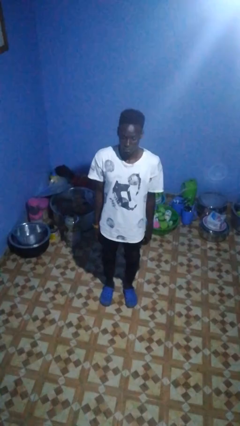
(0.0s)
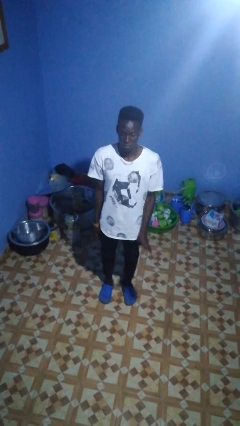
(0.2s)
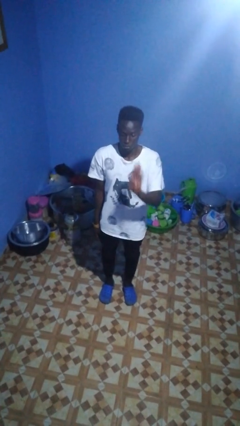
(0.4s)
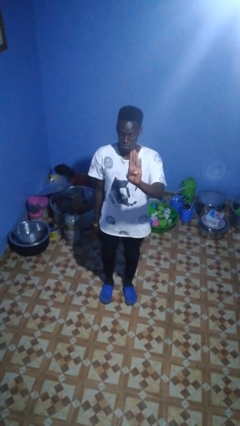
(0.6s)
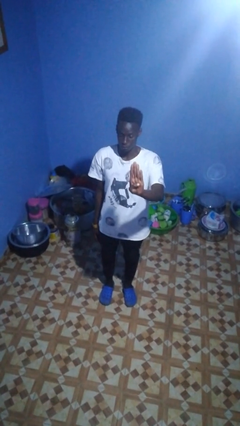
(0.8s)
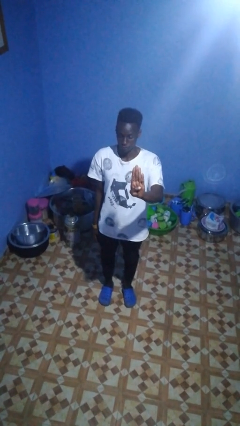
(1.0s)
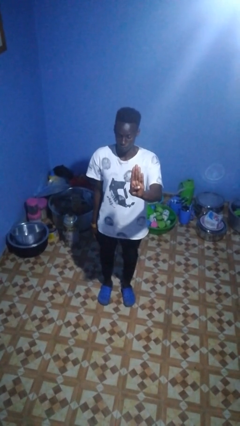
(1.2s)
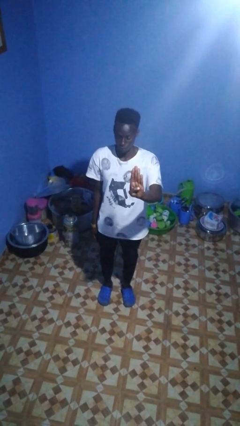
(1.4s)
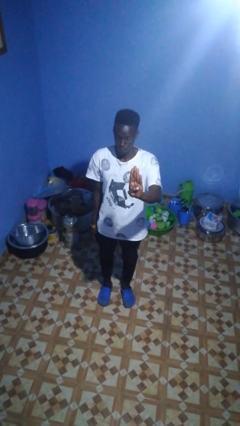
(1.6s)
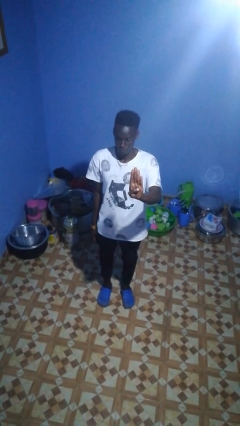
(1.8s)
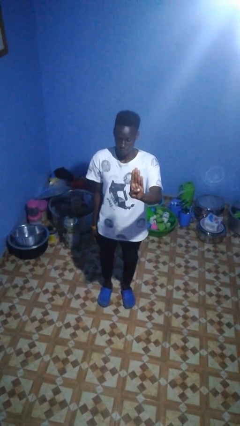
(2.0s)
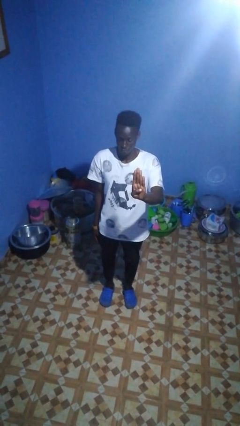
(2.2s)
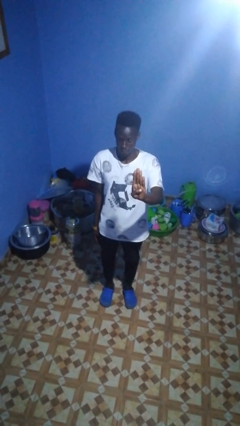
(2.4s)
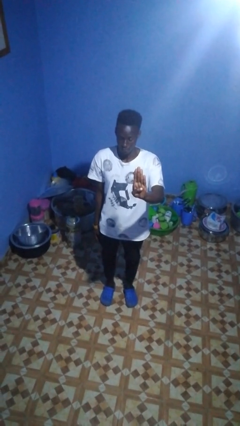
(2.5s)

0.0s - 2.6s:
person gestures number four

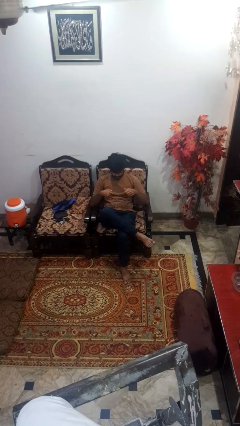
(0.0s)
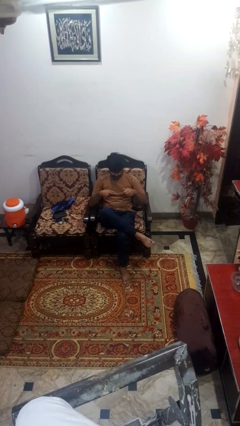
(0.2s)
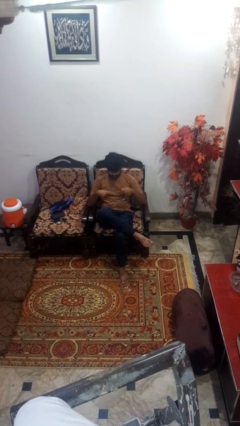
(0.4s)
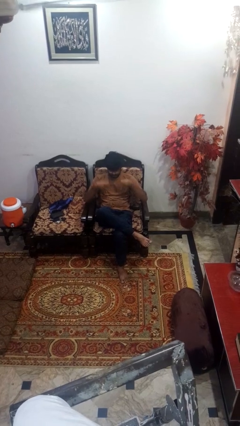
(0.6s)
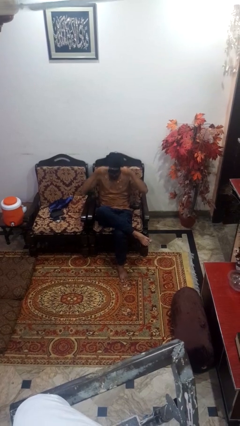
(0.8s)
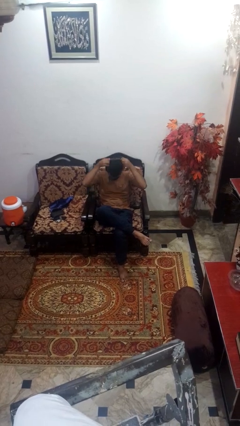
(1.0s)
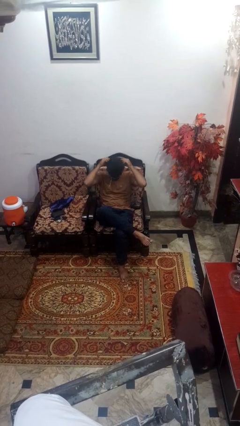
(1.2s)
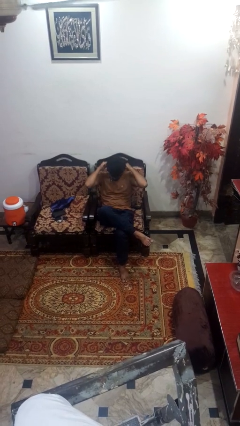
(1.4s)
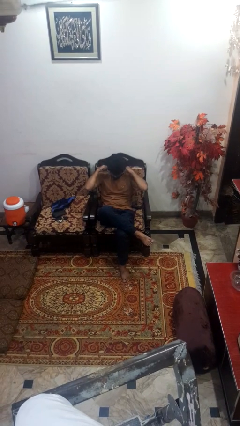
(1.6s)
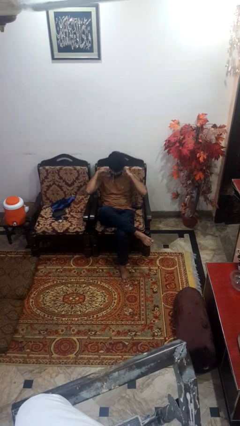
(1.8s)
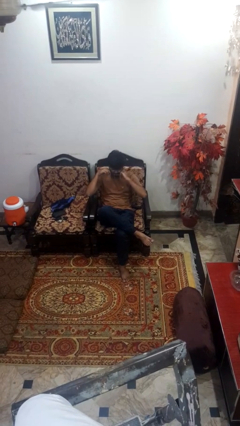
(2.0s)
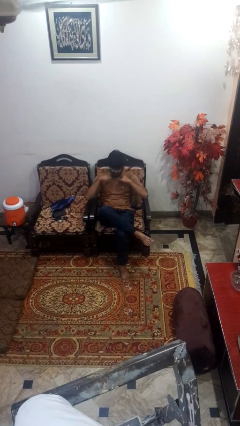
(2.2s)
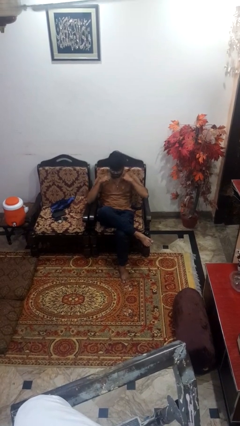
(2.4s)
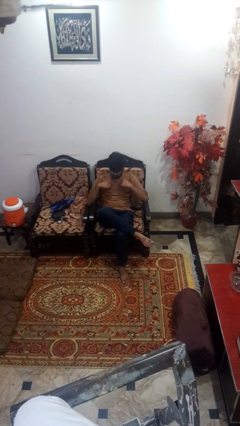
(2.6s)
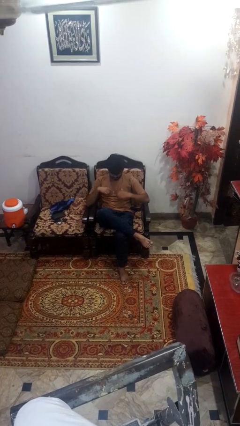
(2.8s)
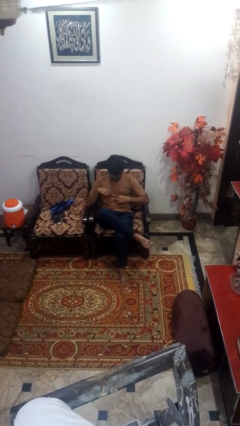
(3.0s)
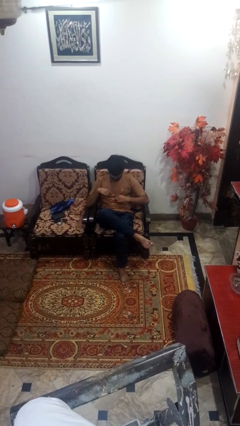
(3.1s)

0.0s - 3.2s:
person puts on necklace

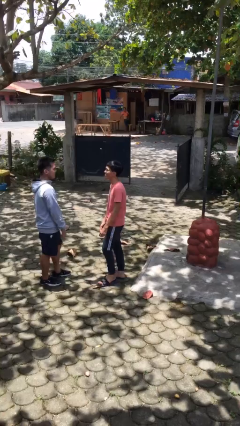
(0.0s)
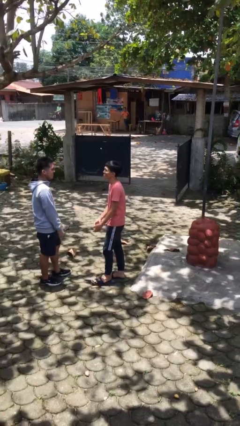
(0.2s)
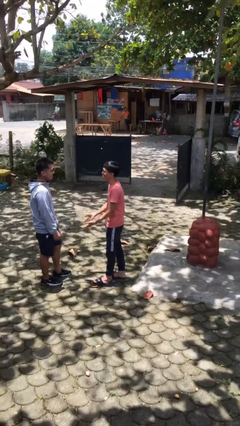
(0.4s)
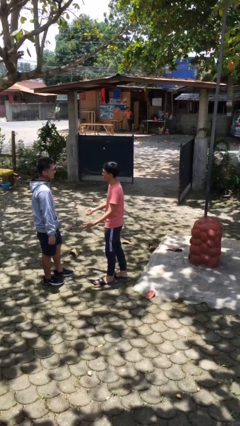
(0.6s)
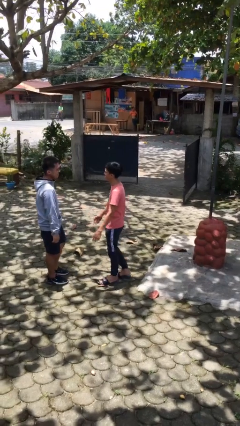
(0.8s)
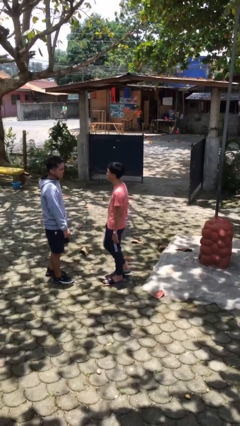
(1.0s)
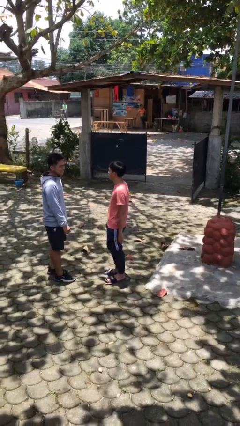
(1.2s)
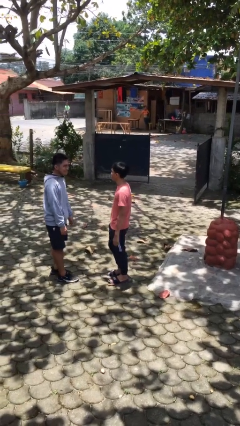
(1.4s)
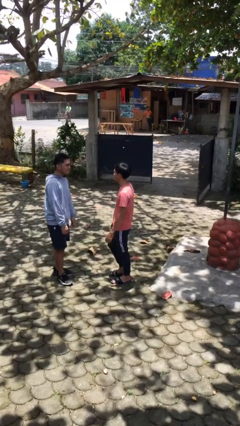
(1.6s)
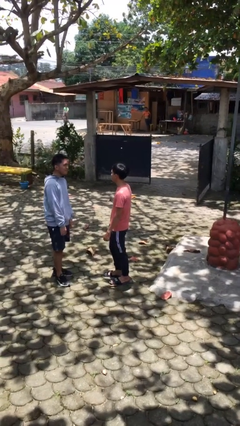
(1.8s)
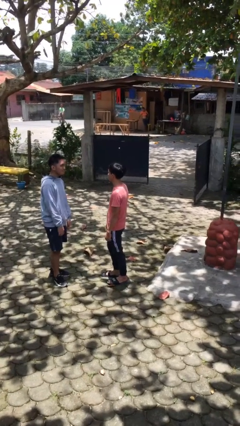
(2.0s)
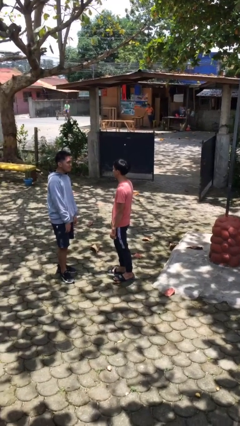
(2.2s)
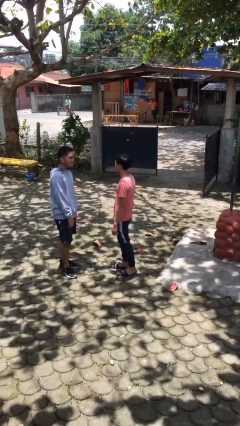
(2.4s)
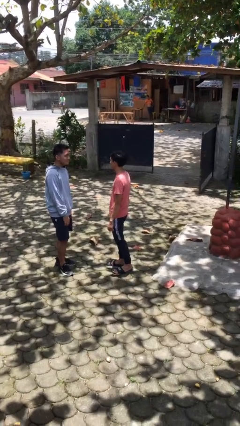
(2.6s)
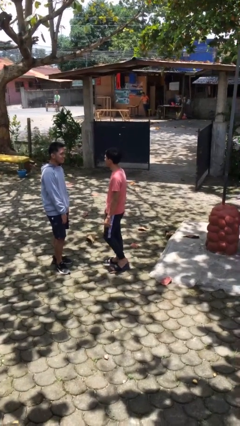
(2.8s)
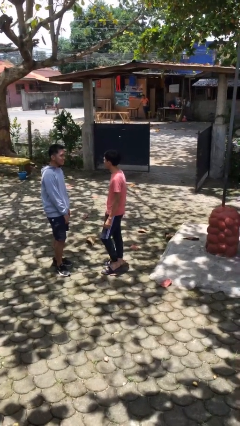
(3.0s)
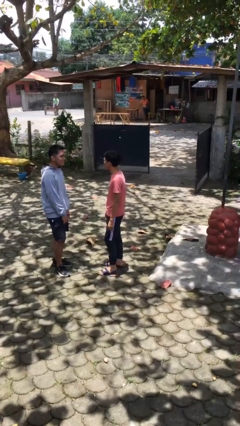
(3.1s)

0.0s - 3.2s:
person talks to person

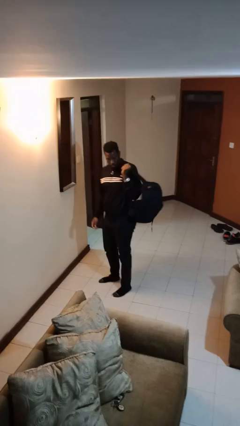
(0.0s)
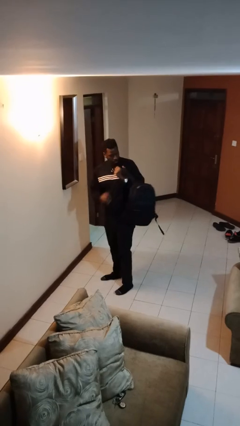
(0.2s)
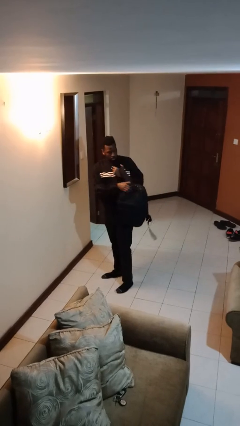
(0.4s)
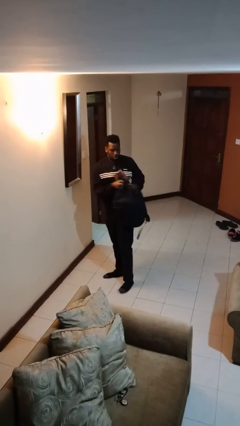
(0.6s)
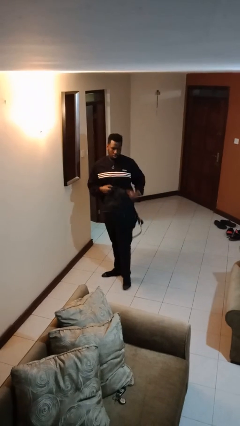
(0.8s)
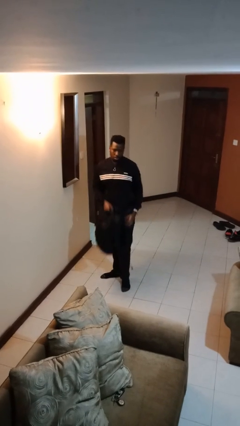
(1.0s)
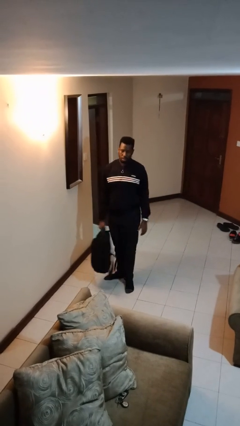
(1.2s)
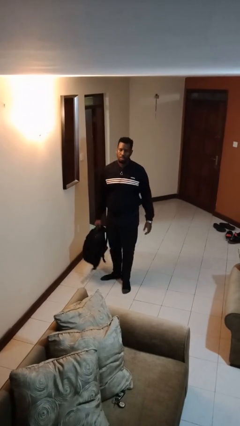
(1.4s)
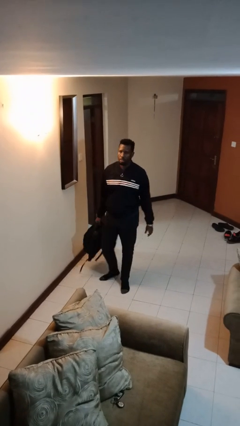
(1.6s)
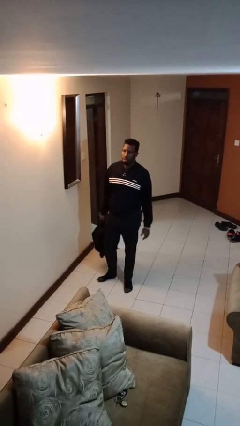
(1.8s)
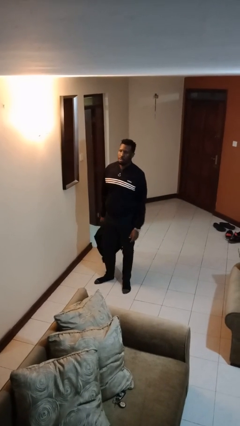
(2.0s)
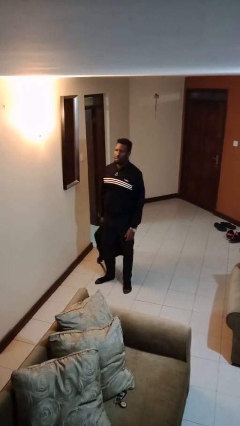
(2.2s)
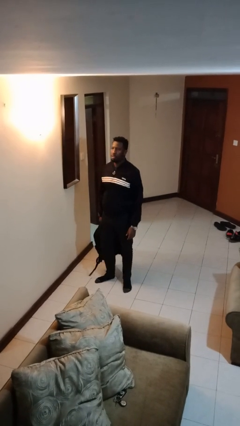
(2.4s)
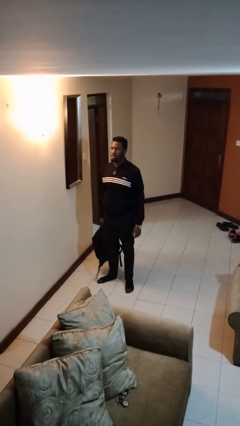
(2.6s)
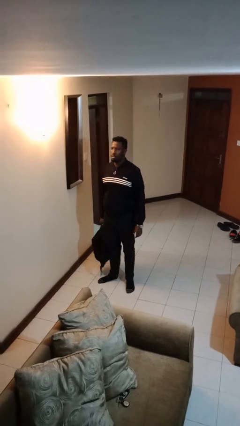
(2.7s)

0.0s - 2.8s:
person takes off backpack

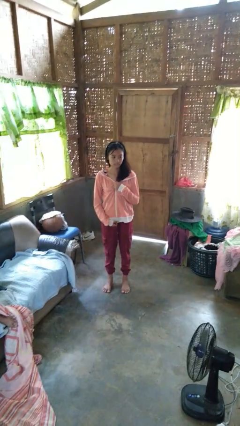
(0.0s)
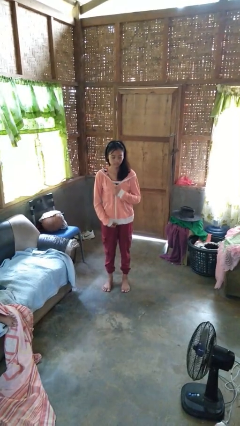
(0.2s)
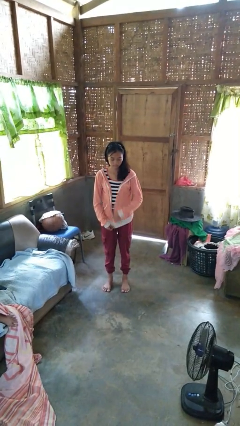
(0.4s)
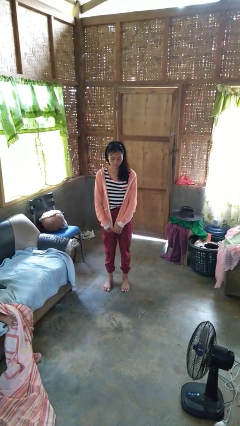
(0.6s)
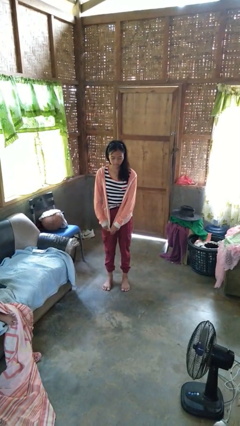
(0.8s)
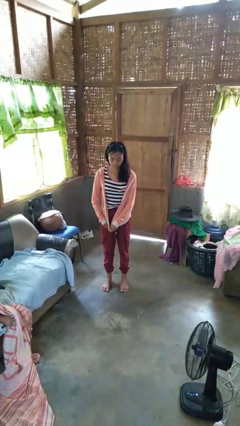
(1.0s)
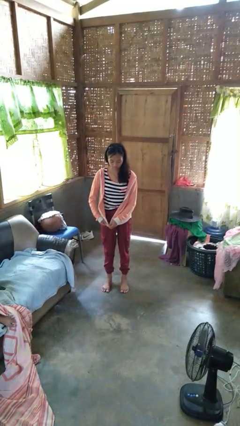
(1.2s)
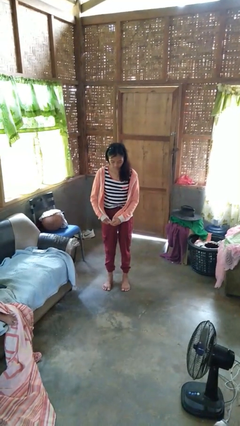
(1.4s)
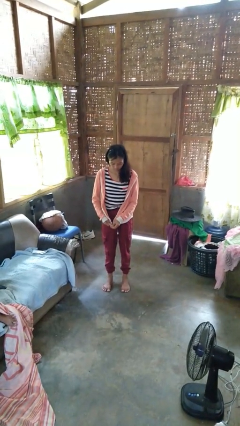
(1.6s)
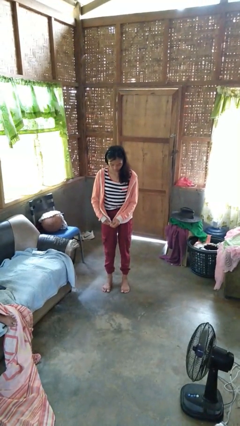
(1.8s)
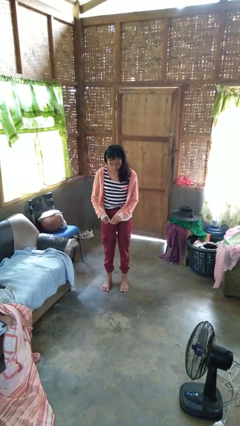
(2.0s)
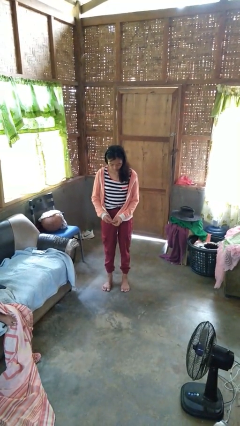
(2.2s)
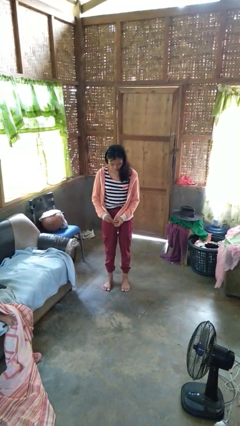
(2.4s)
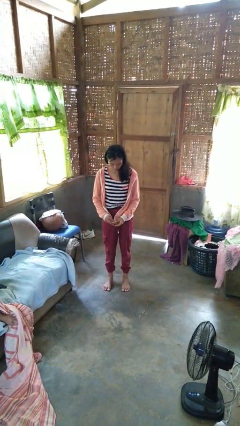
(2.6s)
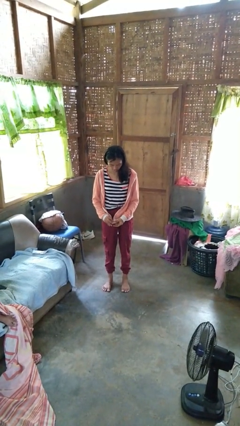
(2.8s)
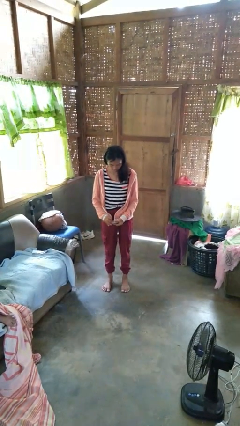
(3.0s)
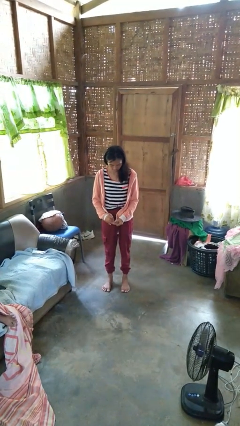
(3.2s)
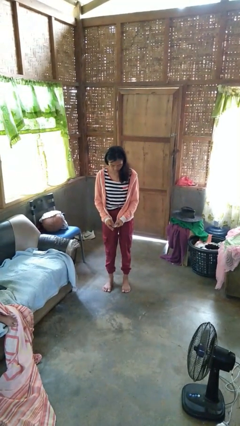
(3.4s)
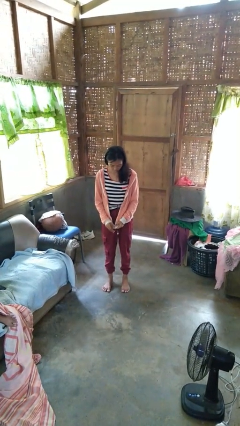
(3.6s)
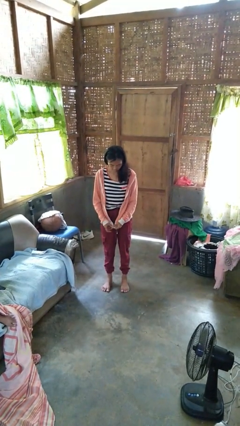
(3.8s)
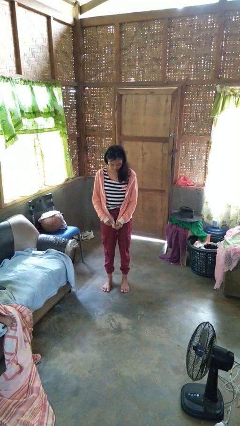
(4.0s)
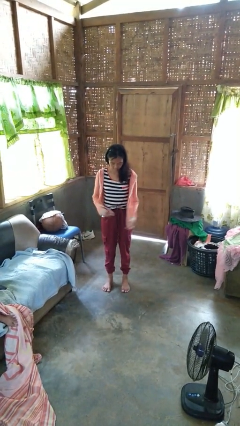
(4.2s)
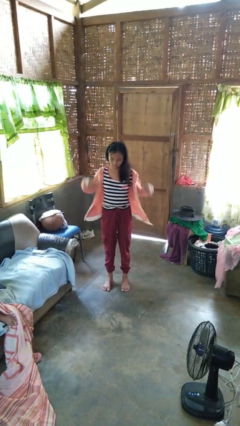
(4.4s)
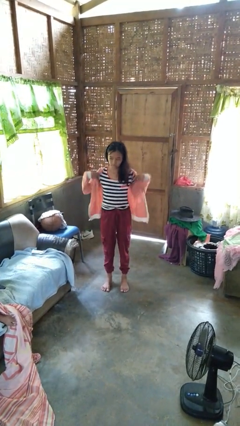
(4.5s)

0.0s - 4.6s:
person unzips jacket

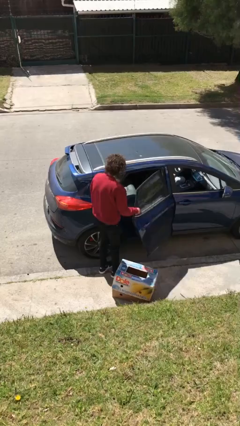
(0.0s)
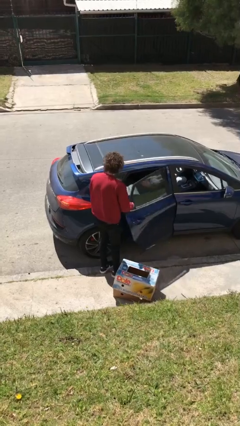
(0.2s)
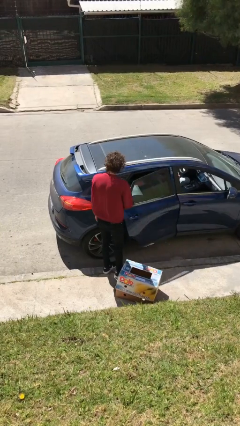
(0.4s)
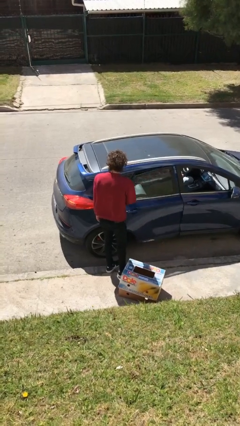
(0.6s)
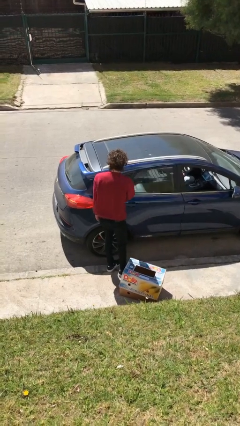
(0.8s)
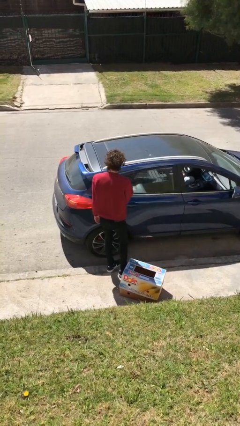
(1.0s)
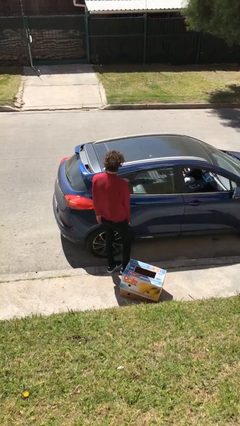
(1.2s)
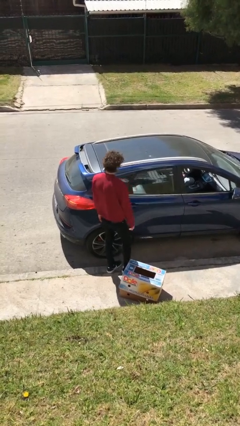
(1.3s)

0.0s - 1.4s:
person closes car door
